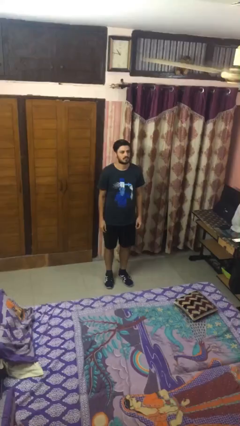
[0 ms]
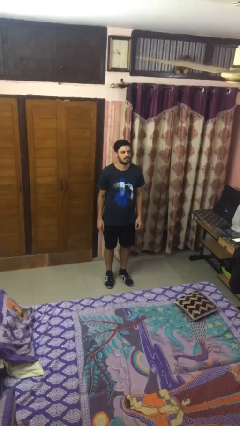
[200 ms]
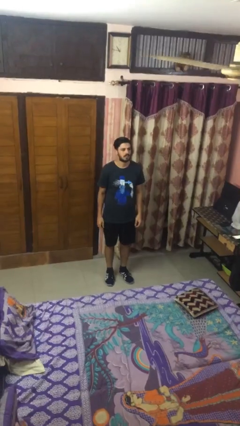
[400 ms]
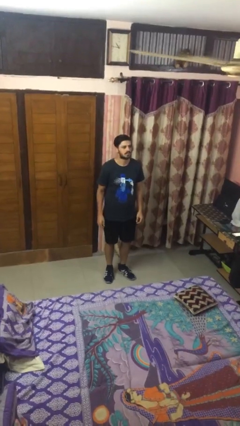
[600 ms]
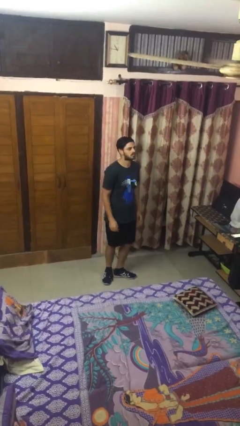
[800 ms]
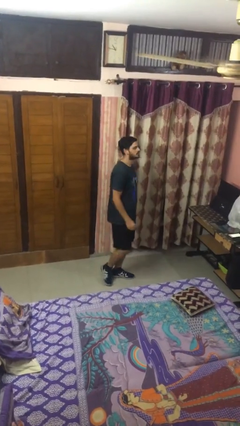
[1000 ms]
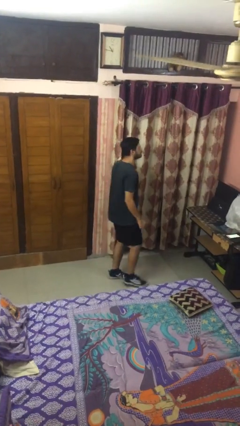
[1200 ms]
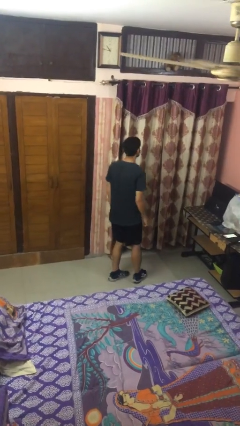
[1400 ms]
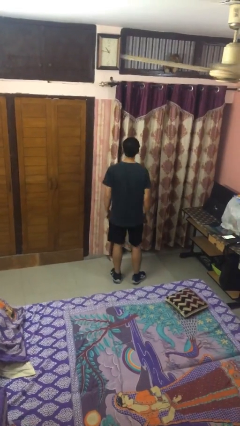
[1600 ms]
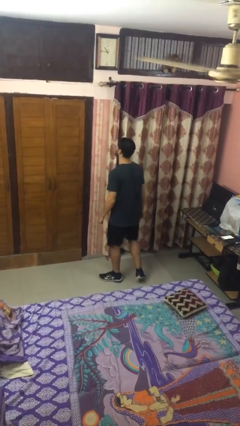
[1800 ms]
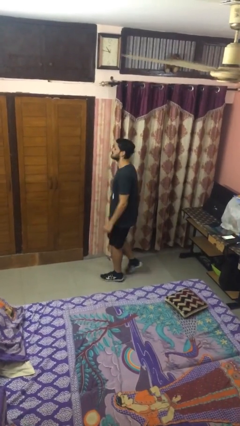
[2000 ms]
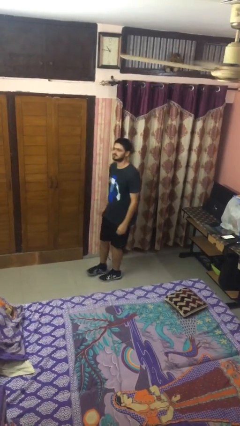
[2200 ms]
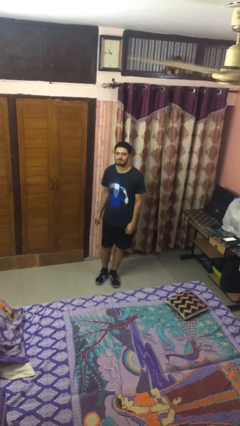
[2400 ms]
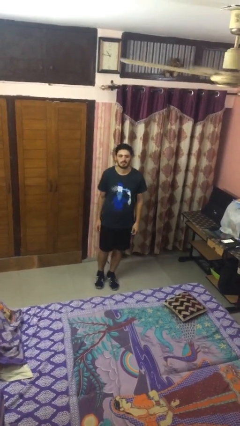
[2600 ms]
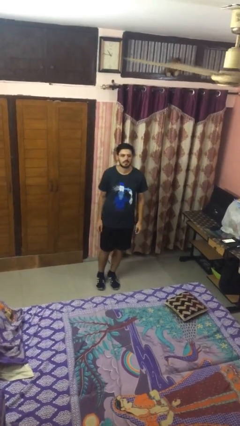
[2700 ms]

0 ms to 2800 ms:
person twirls

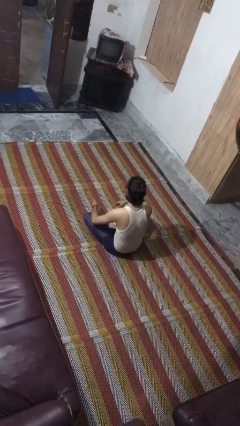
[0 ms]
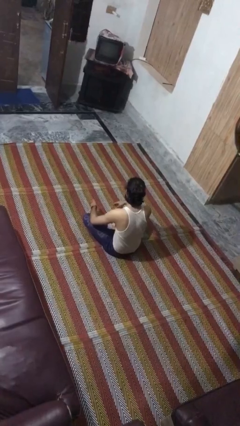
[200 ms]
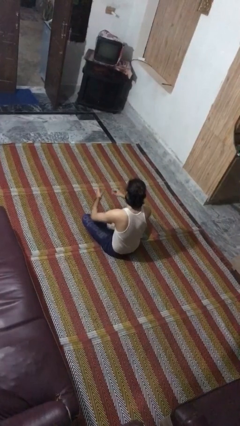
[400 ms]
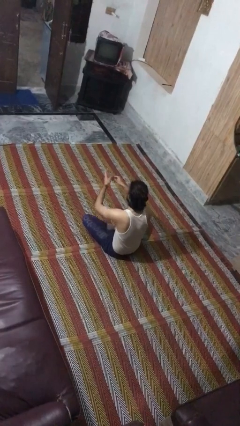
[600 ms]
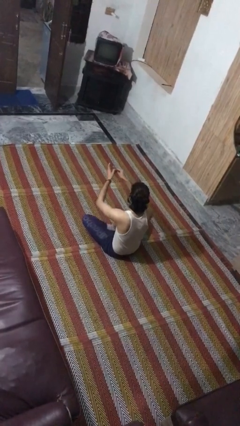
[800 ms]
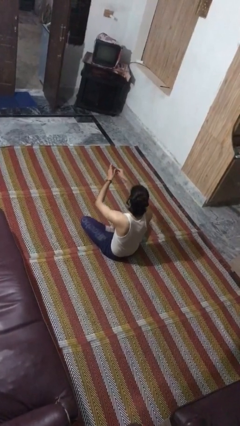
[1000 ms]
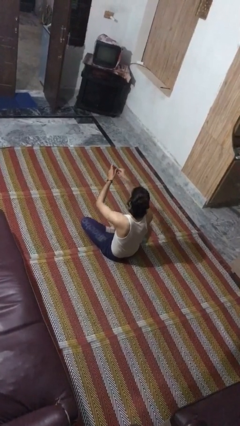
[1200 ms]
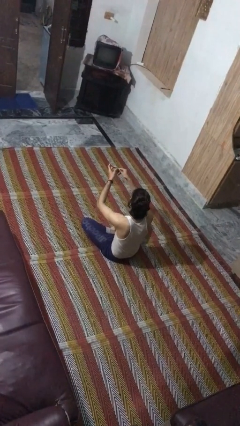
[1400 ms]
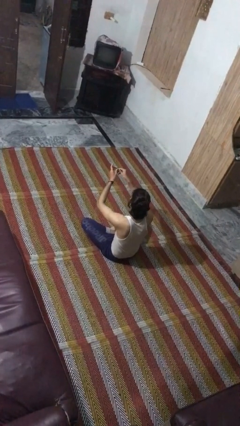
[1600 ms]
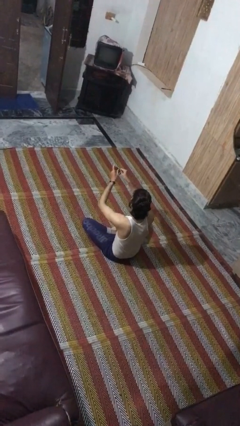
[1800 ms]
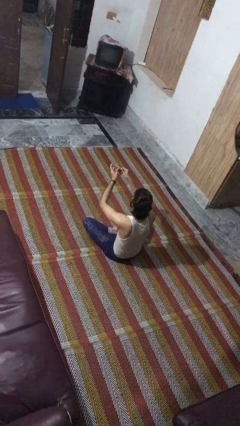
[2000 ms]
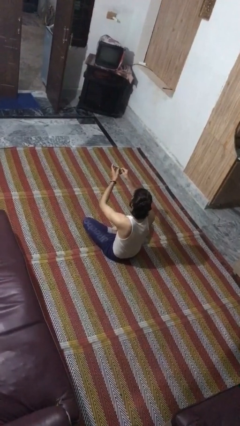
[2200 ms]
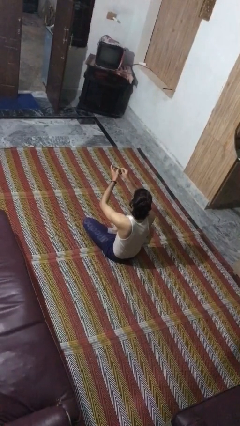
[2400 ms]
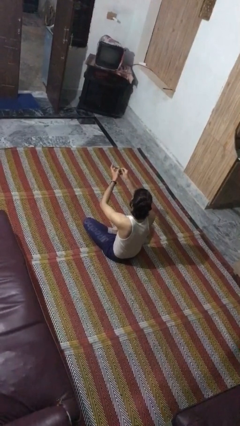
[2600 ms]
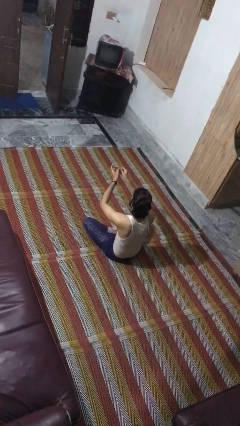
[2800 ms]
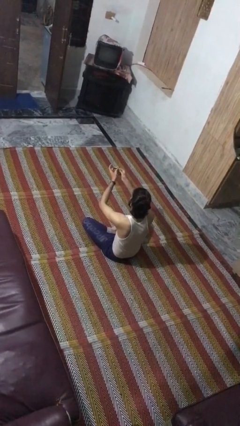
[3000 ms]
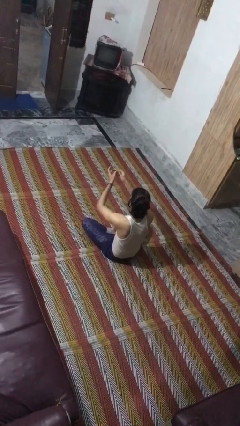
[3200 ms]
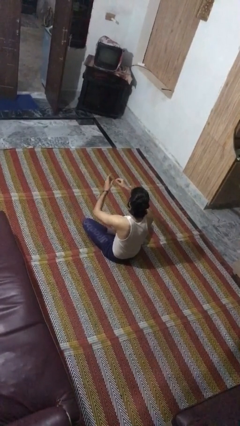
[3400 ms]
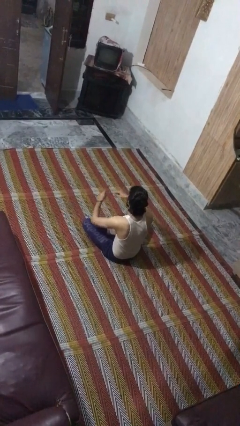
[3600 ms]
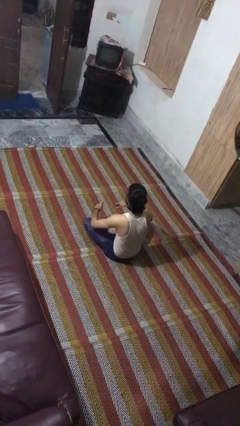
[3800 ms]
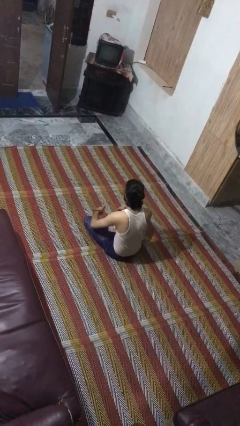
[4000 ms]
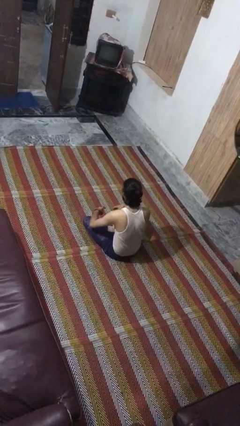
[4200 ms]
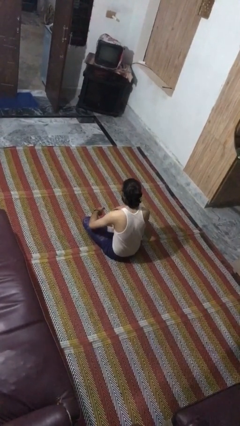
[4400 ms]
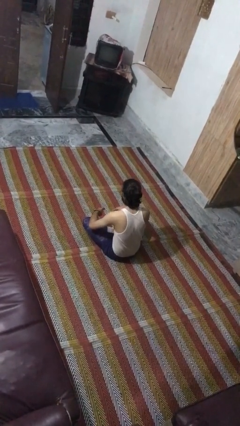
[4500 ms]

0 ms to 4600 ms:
person clips fingernails

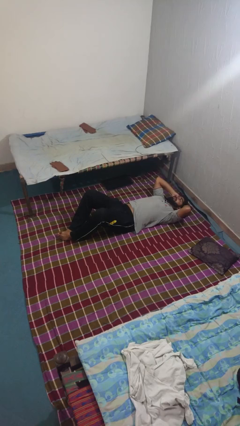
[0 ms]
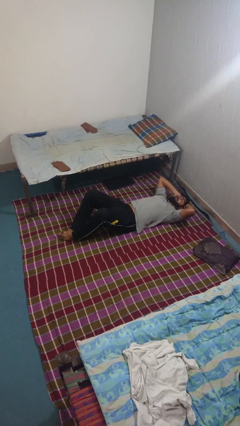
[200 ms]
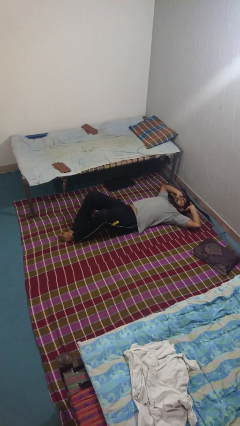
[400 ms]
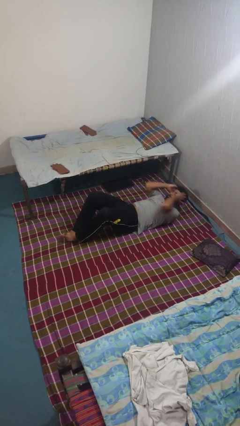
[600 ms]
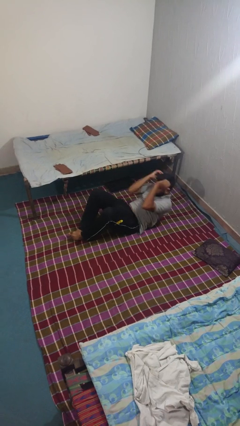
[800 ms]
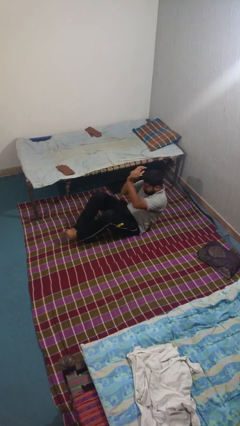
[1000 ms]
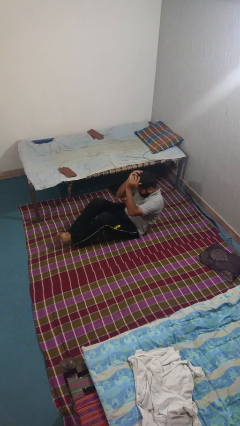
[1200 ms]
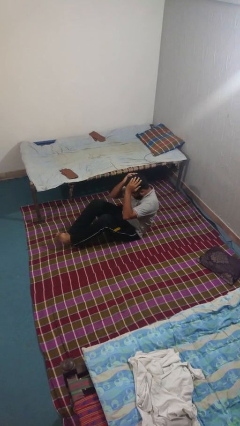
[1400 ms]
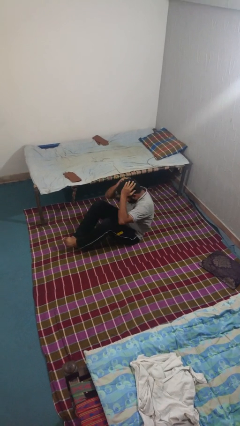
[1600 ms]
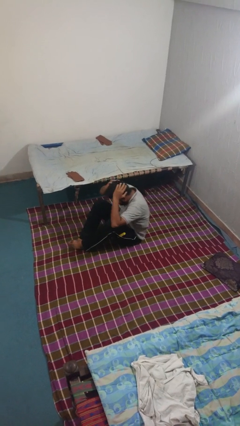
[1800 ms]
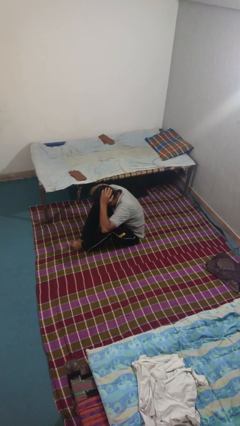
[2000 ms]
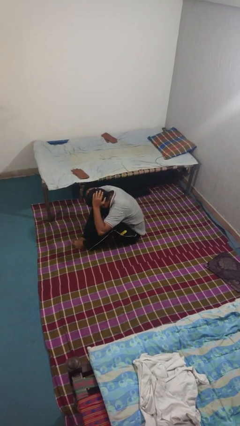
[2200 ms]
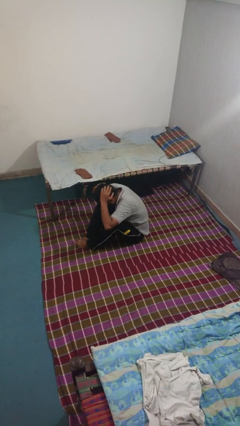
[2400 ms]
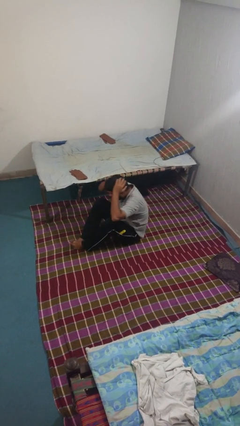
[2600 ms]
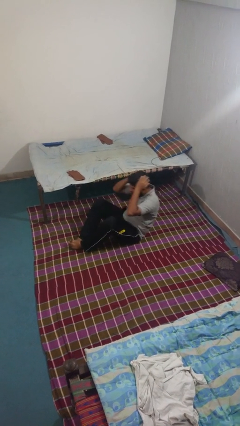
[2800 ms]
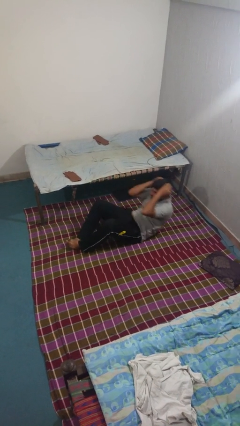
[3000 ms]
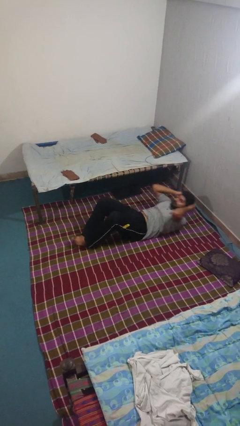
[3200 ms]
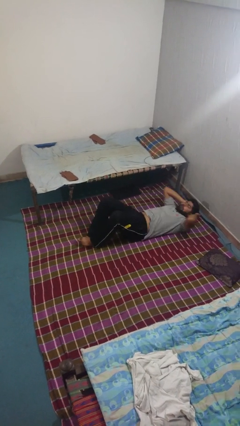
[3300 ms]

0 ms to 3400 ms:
person exercises with situp

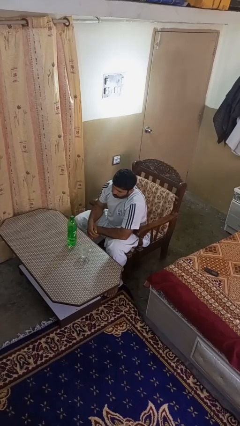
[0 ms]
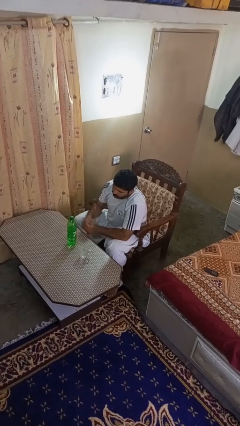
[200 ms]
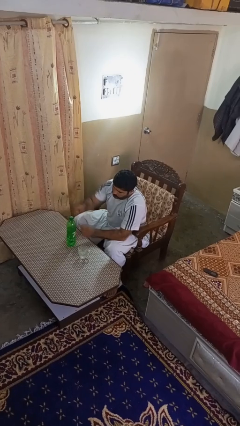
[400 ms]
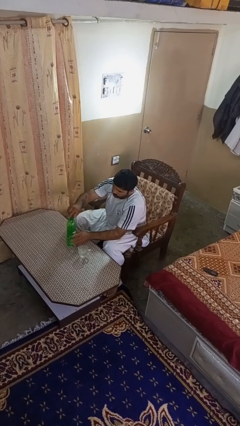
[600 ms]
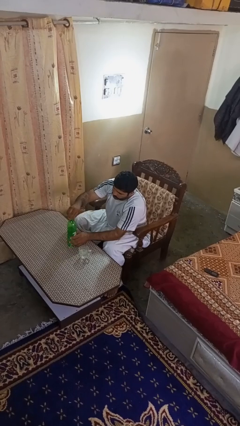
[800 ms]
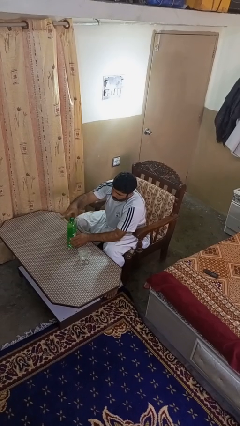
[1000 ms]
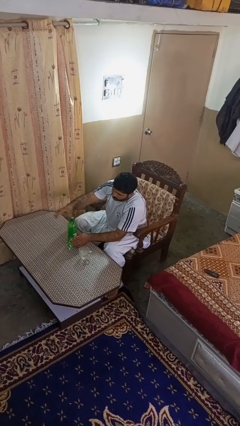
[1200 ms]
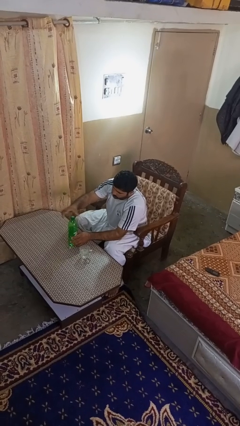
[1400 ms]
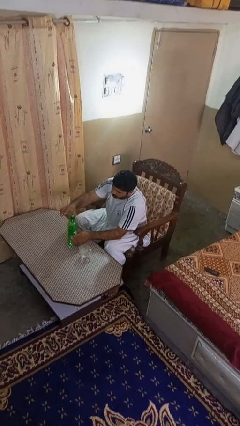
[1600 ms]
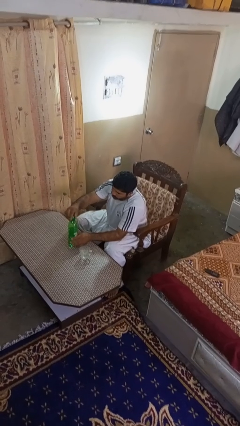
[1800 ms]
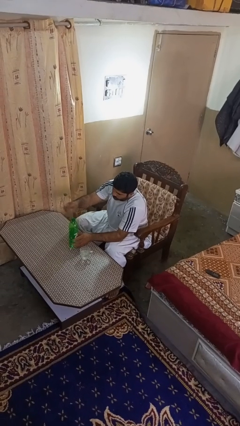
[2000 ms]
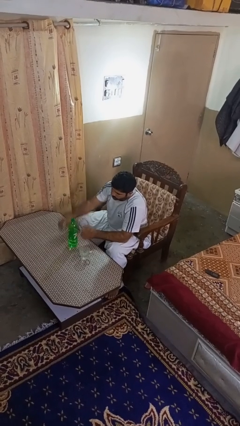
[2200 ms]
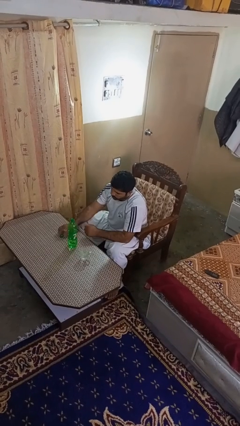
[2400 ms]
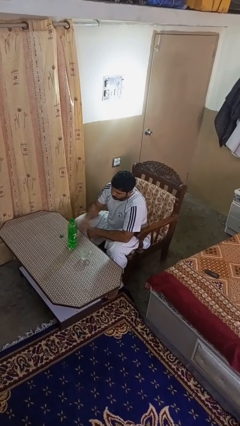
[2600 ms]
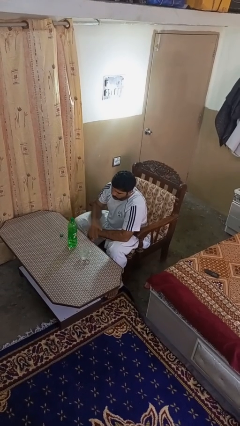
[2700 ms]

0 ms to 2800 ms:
person unscrews lid from bottle

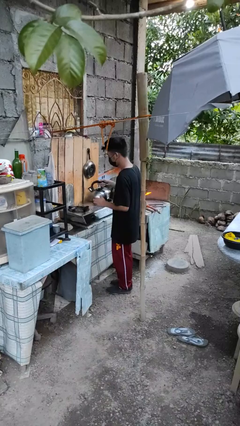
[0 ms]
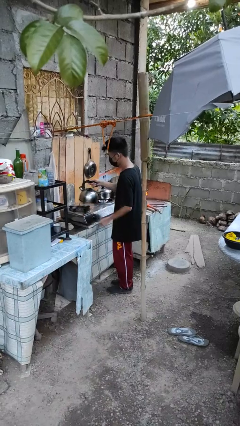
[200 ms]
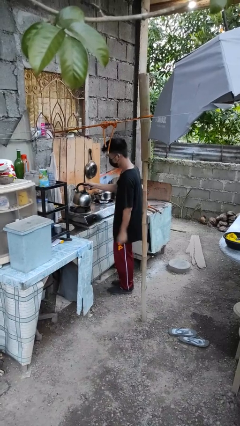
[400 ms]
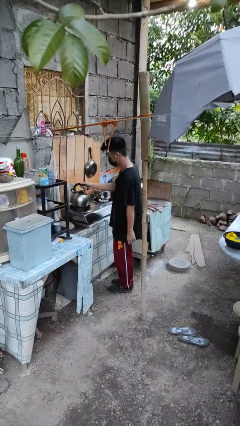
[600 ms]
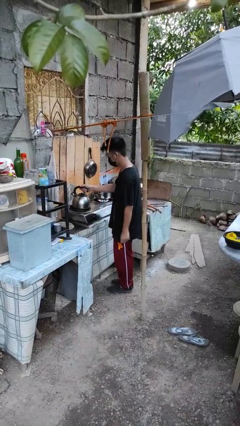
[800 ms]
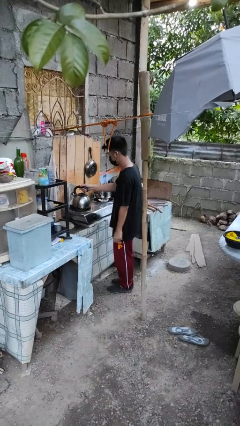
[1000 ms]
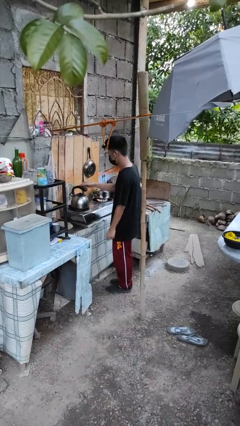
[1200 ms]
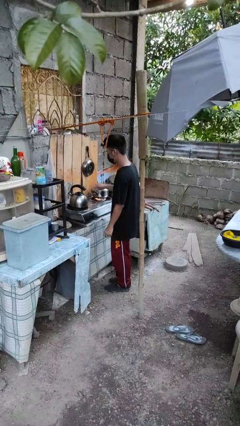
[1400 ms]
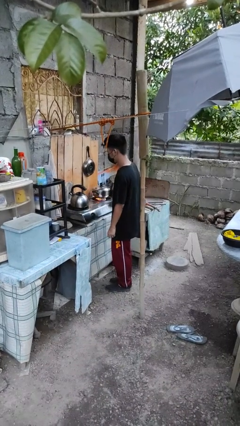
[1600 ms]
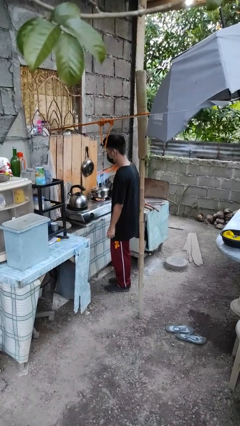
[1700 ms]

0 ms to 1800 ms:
person puts down object on countertop

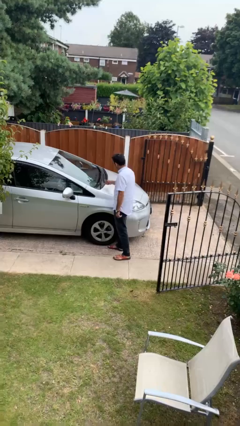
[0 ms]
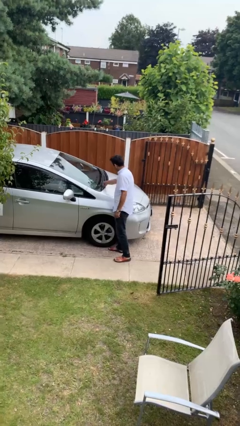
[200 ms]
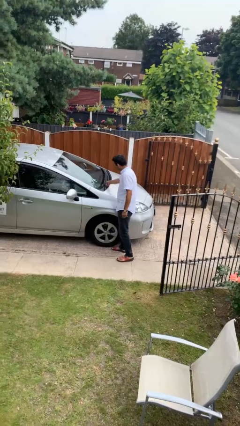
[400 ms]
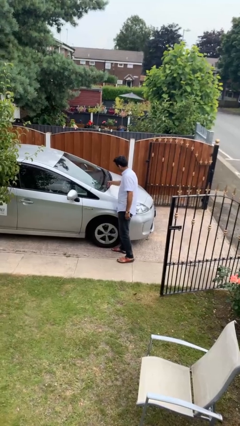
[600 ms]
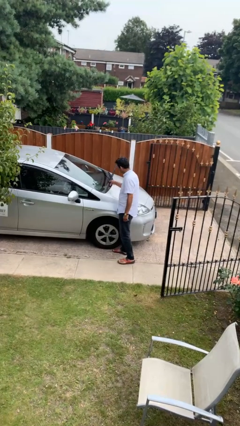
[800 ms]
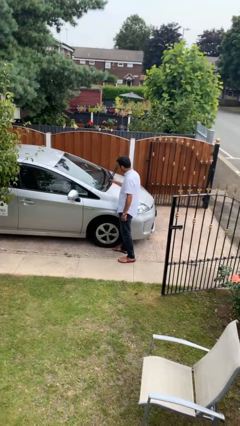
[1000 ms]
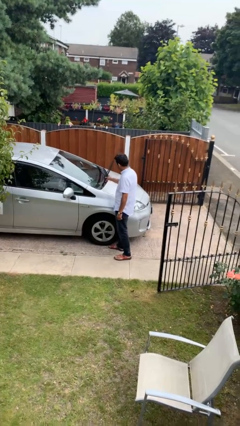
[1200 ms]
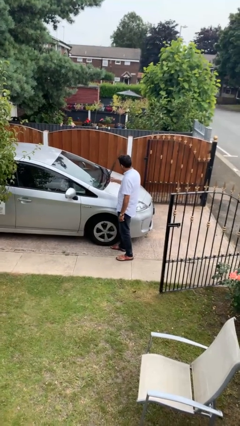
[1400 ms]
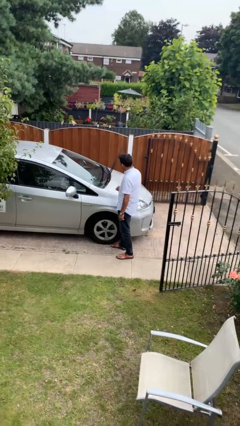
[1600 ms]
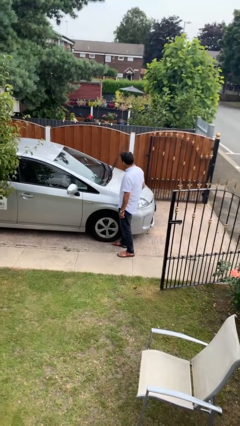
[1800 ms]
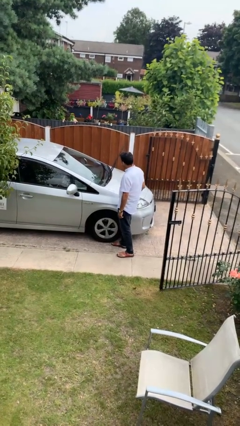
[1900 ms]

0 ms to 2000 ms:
person flips up car wipers
